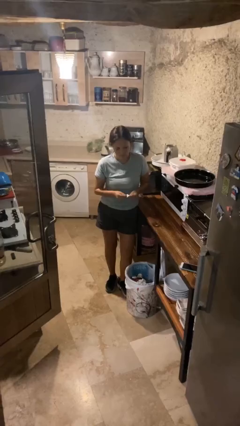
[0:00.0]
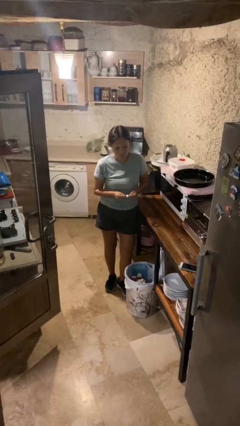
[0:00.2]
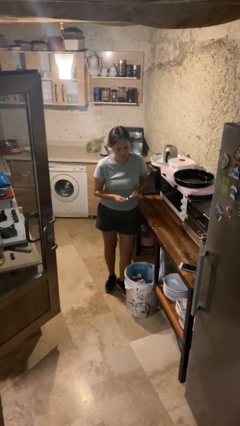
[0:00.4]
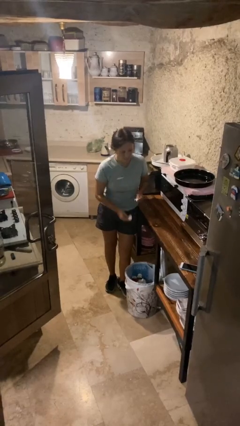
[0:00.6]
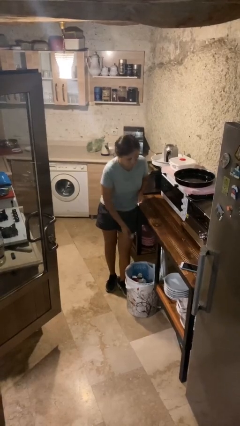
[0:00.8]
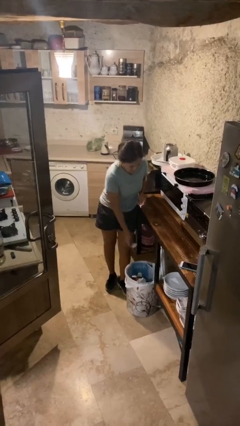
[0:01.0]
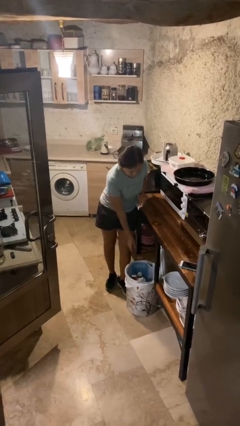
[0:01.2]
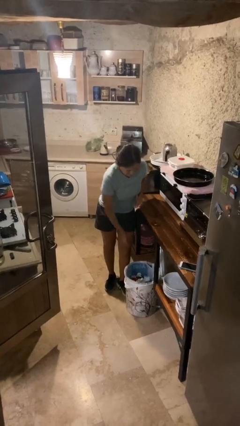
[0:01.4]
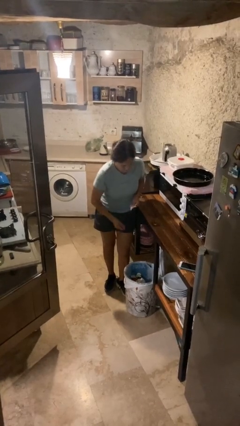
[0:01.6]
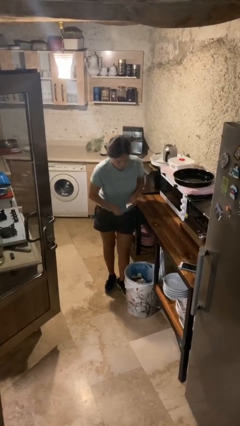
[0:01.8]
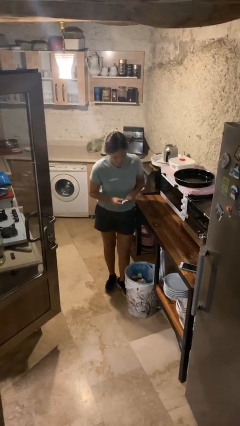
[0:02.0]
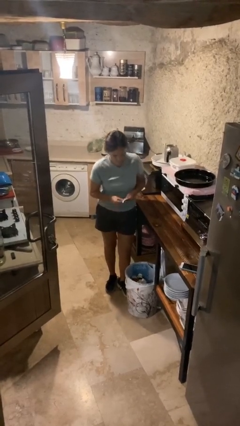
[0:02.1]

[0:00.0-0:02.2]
person discards trash

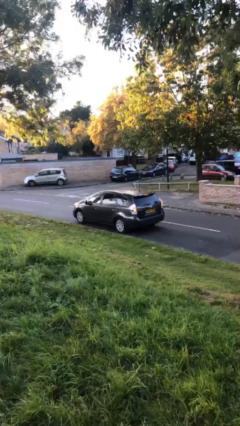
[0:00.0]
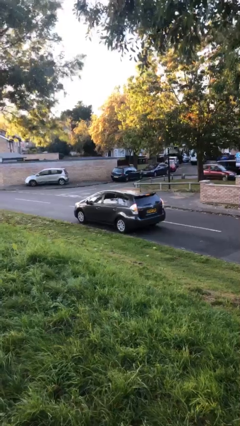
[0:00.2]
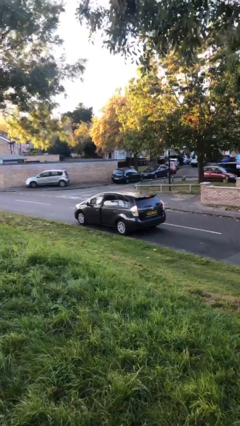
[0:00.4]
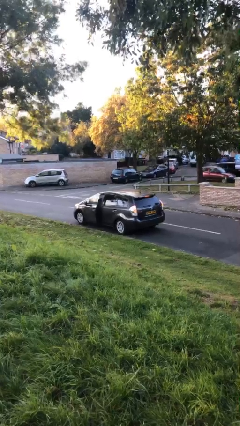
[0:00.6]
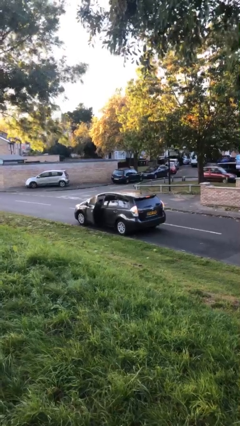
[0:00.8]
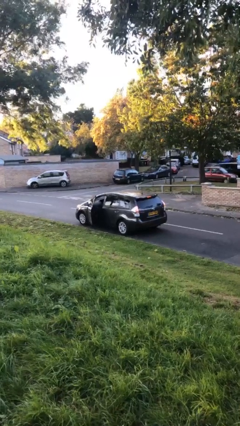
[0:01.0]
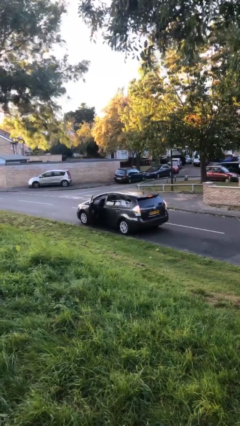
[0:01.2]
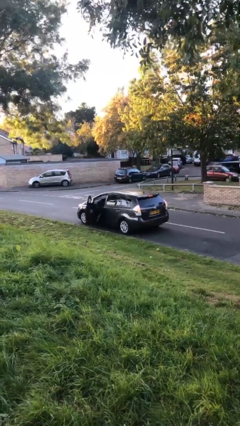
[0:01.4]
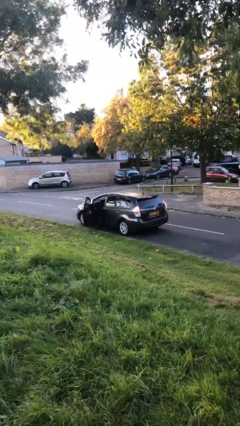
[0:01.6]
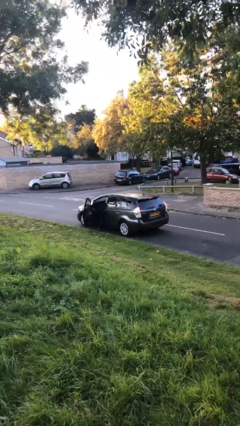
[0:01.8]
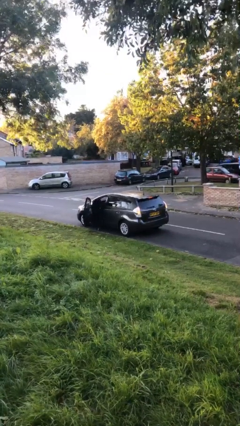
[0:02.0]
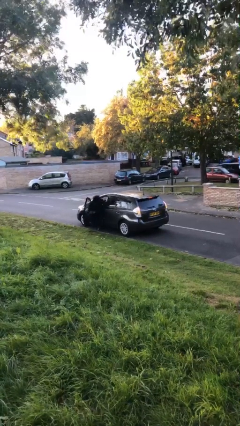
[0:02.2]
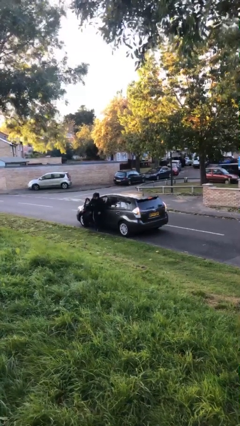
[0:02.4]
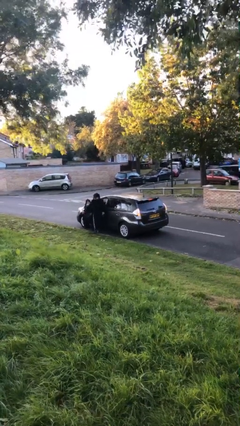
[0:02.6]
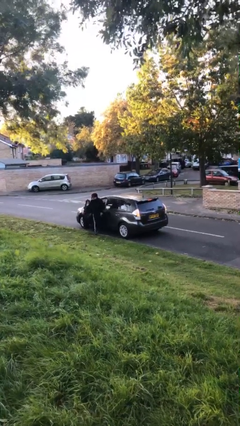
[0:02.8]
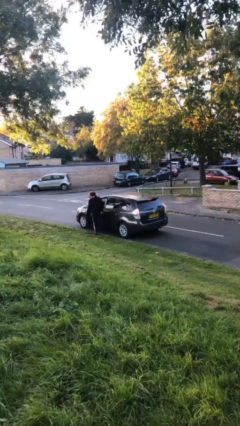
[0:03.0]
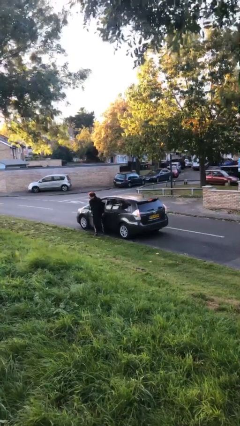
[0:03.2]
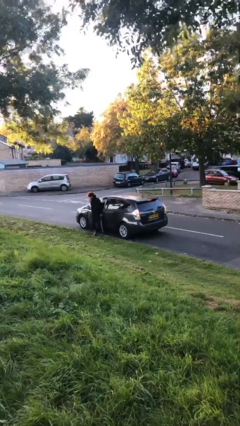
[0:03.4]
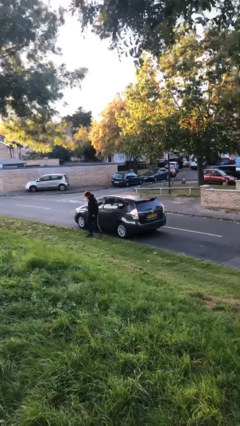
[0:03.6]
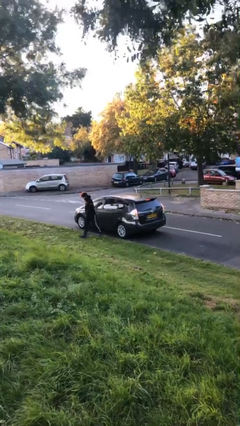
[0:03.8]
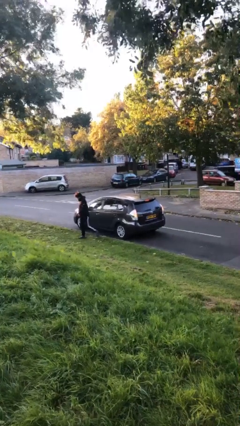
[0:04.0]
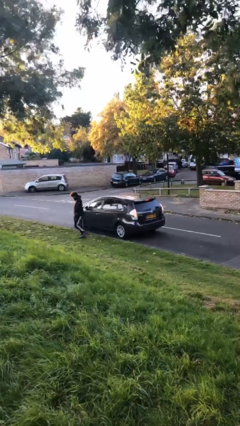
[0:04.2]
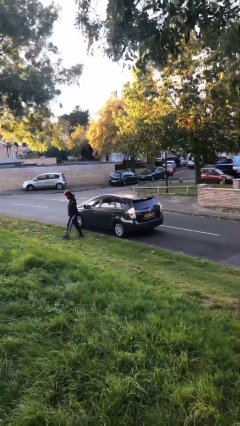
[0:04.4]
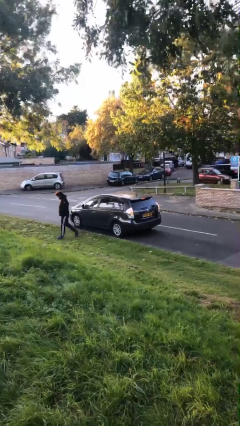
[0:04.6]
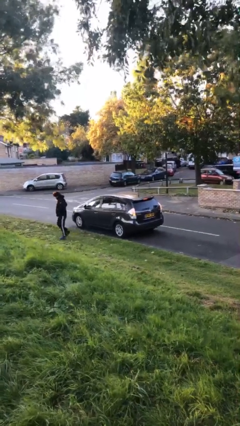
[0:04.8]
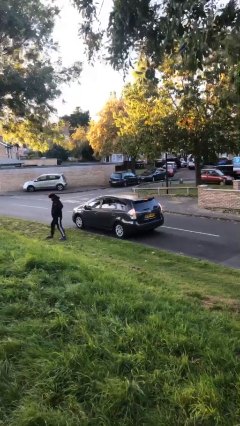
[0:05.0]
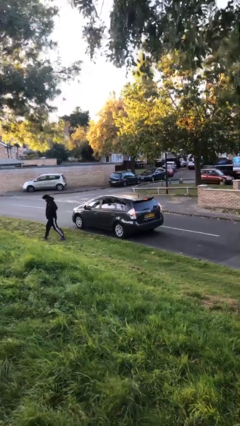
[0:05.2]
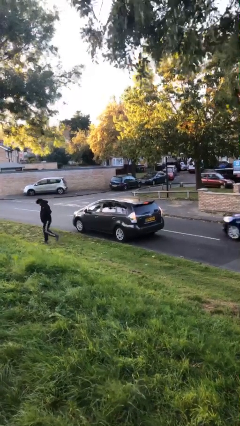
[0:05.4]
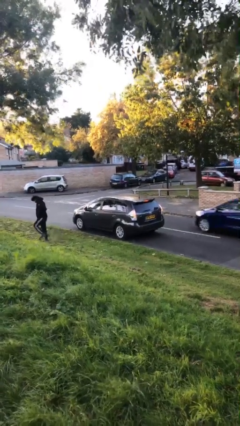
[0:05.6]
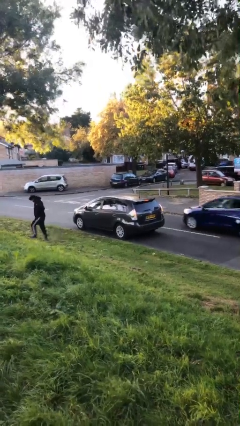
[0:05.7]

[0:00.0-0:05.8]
car drops off person

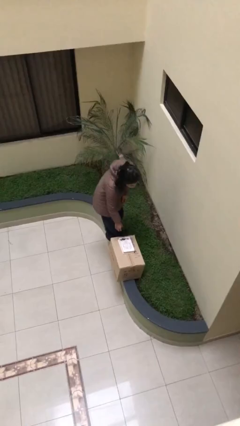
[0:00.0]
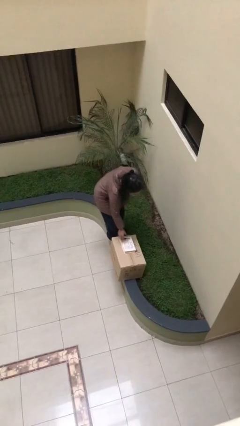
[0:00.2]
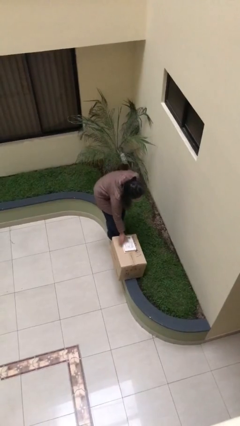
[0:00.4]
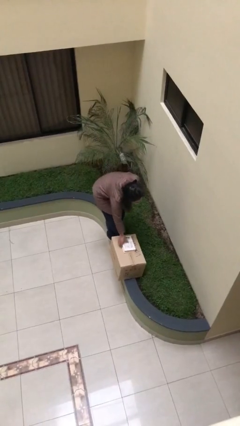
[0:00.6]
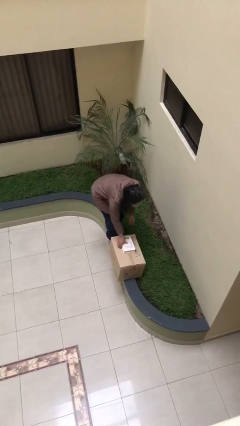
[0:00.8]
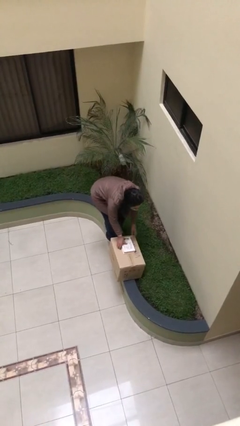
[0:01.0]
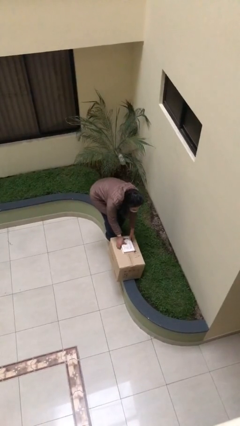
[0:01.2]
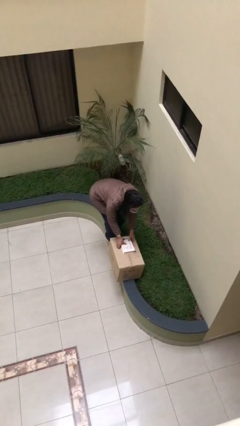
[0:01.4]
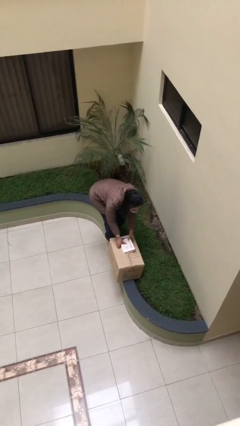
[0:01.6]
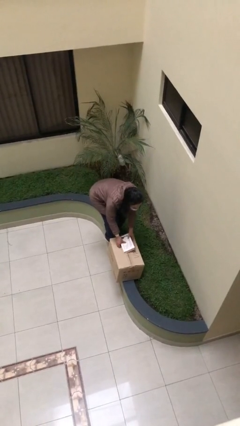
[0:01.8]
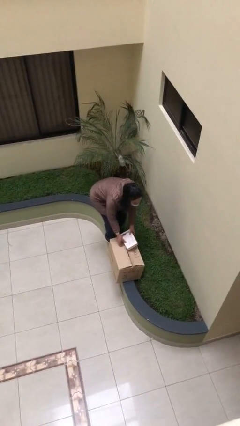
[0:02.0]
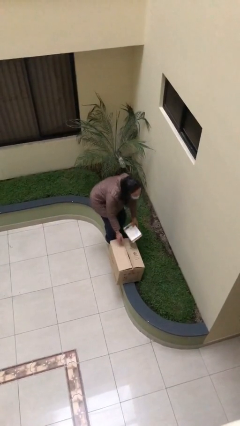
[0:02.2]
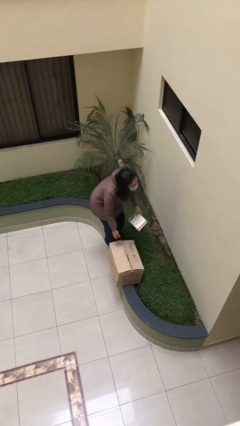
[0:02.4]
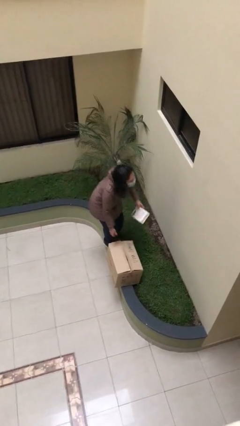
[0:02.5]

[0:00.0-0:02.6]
person picks up object from table

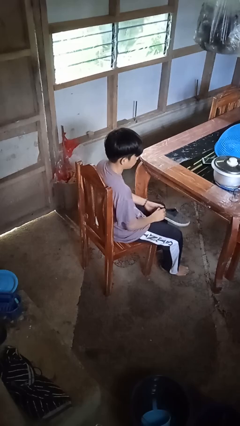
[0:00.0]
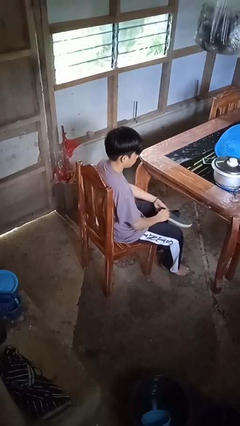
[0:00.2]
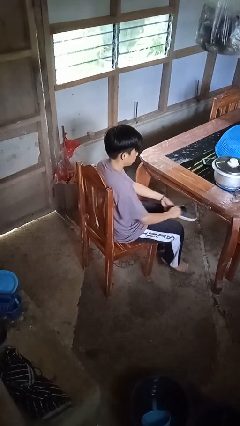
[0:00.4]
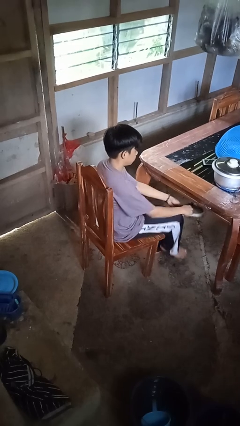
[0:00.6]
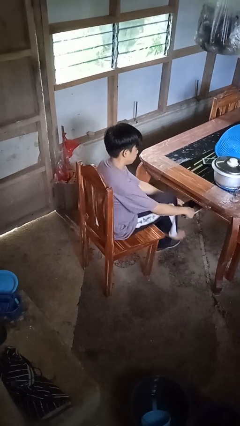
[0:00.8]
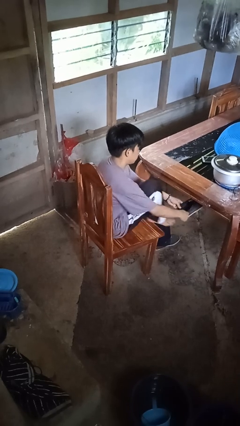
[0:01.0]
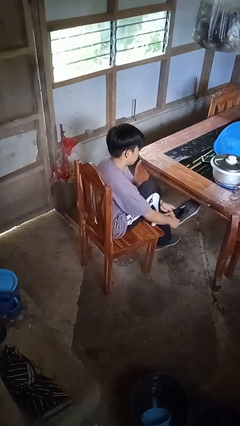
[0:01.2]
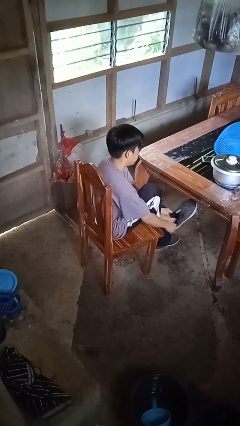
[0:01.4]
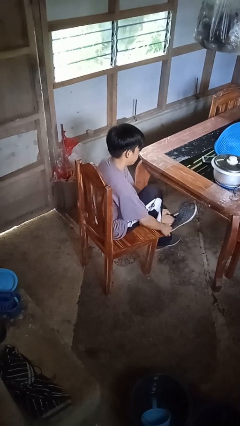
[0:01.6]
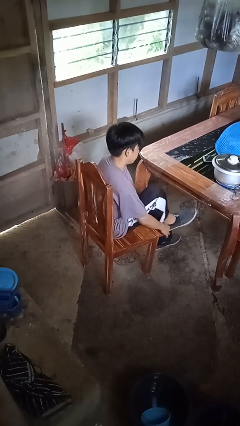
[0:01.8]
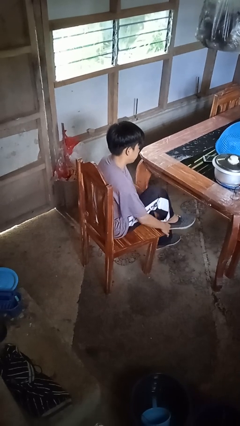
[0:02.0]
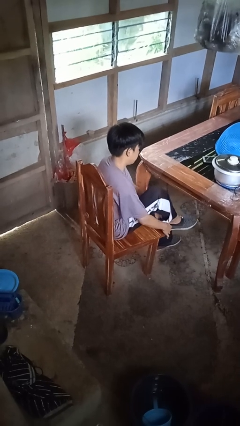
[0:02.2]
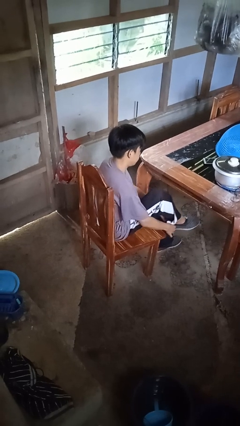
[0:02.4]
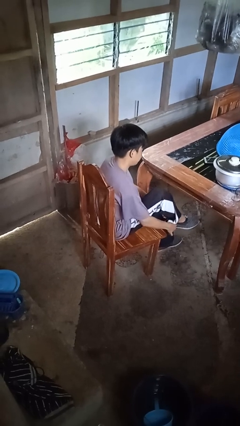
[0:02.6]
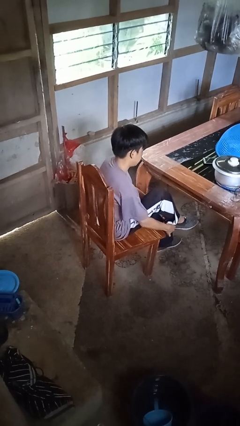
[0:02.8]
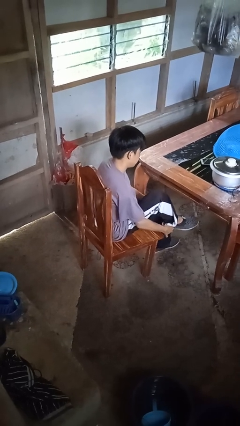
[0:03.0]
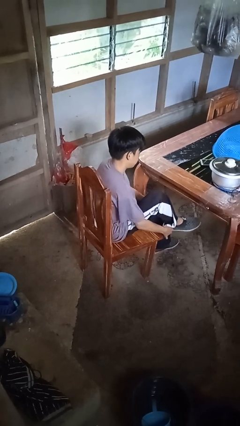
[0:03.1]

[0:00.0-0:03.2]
person puts on shoes

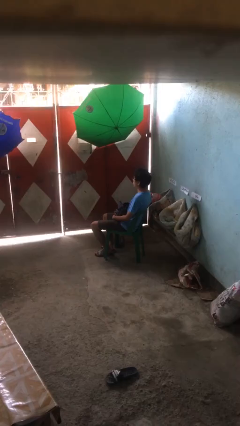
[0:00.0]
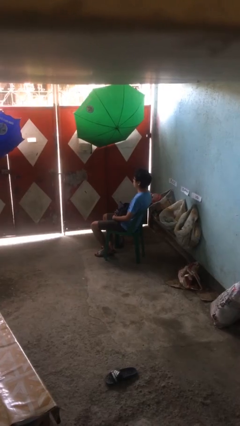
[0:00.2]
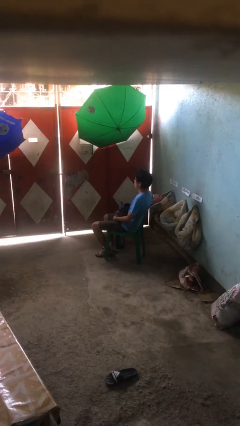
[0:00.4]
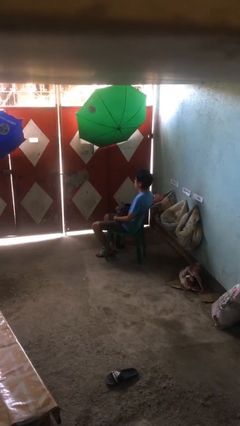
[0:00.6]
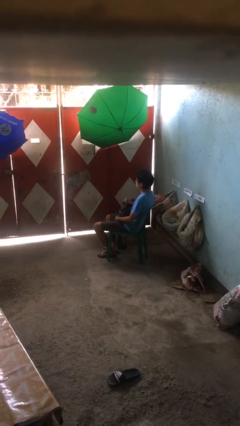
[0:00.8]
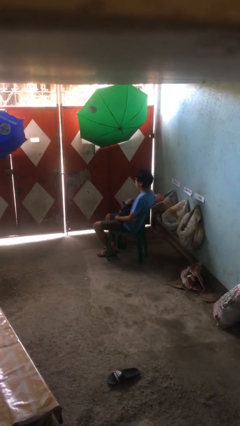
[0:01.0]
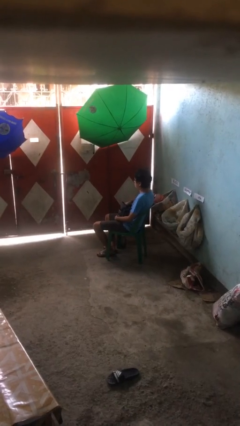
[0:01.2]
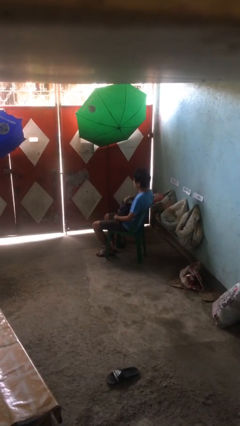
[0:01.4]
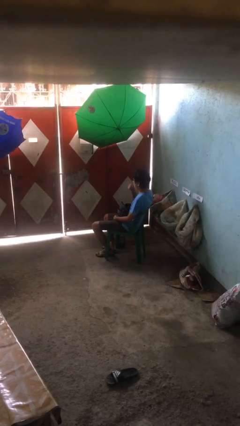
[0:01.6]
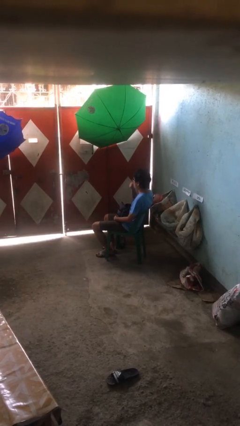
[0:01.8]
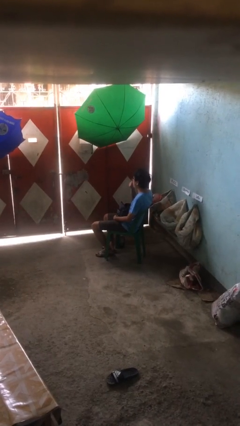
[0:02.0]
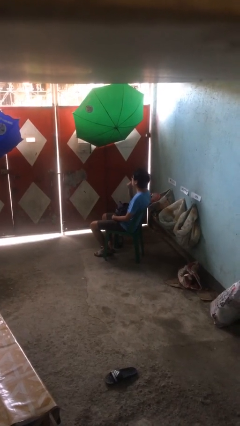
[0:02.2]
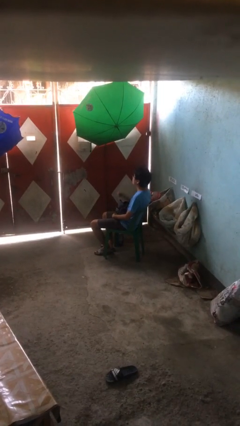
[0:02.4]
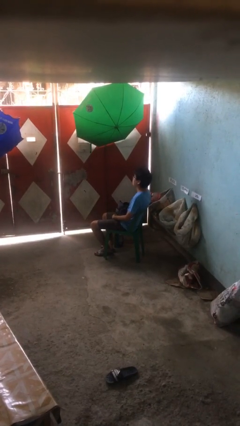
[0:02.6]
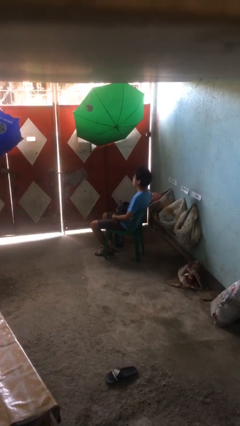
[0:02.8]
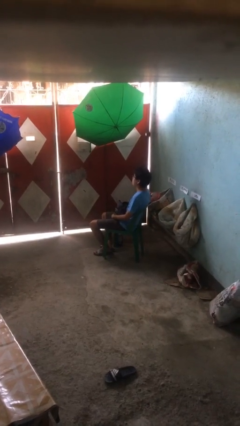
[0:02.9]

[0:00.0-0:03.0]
person eats snack from bag

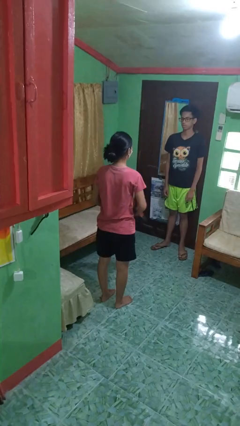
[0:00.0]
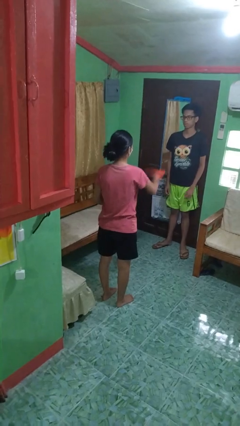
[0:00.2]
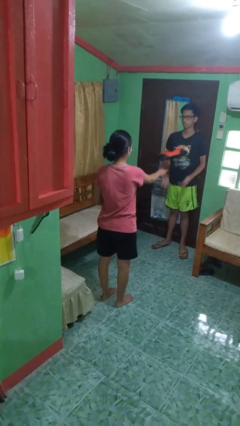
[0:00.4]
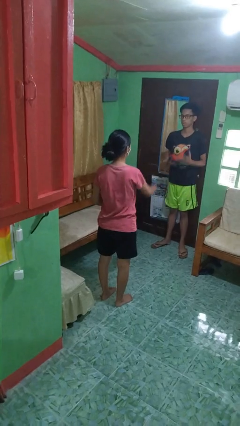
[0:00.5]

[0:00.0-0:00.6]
person throws object to person

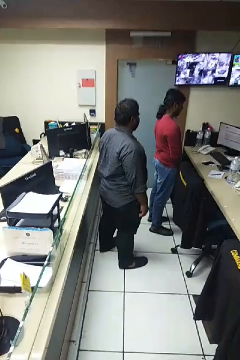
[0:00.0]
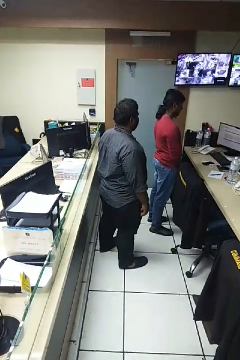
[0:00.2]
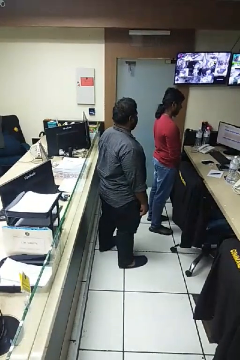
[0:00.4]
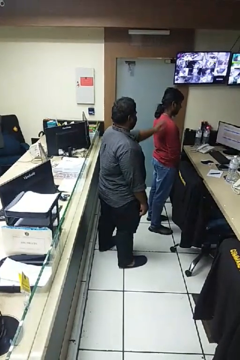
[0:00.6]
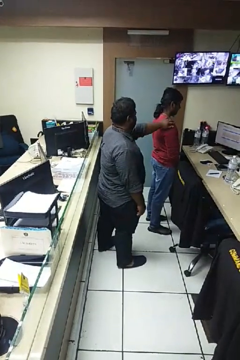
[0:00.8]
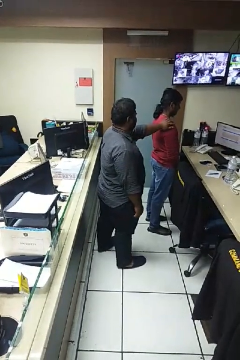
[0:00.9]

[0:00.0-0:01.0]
person grabs person by shoulder
